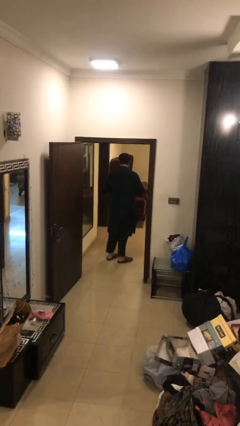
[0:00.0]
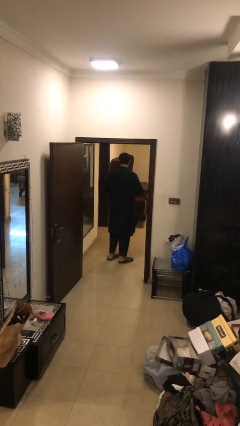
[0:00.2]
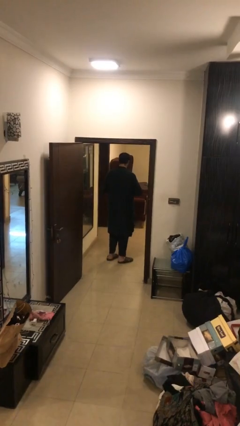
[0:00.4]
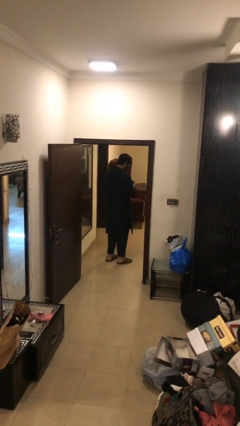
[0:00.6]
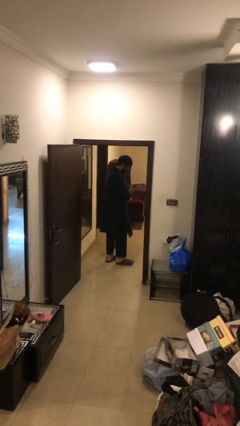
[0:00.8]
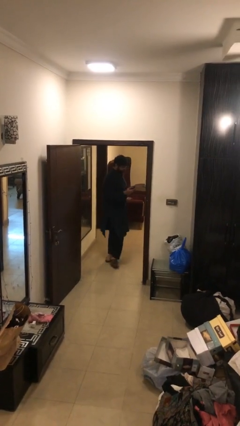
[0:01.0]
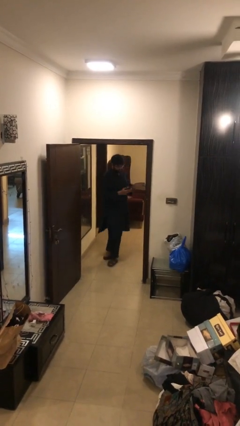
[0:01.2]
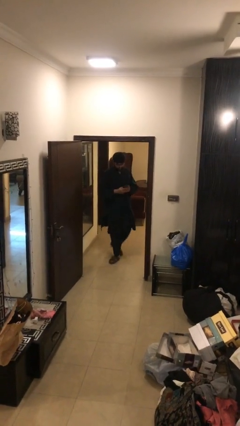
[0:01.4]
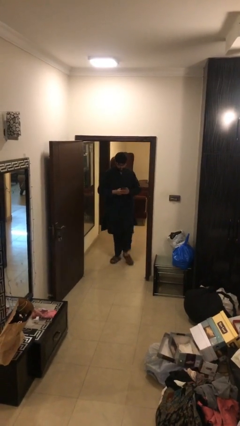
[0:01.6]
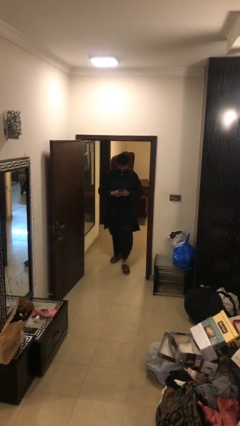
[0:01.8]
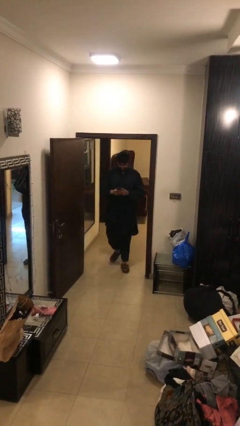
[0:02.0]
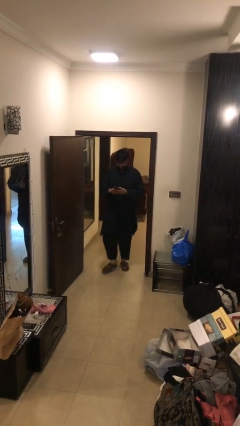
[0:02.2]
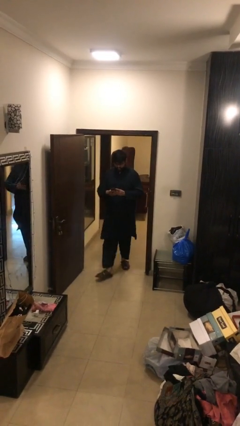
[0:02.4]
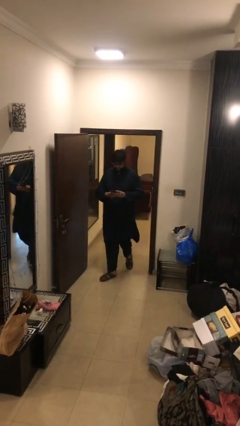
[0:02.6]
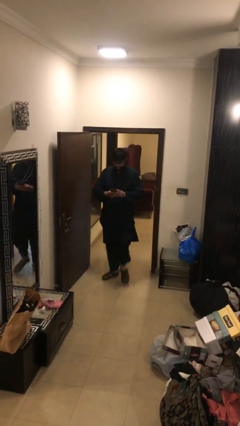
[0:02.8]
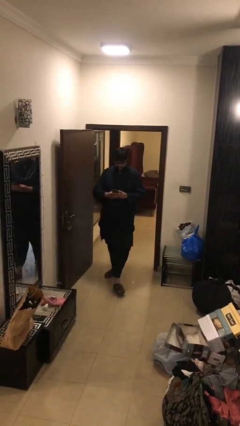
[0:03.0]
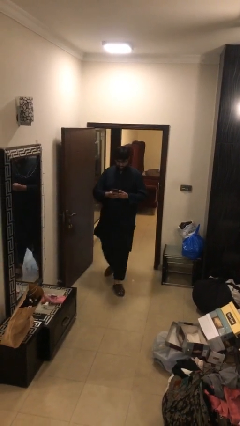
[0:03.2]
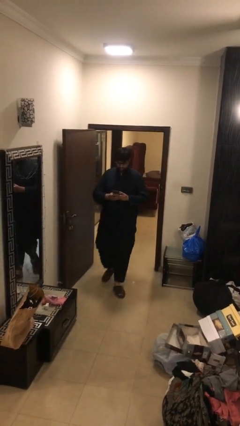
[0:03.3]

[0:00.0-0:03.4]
person enters scene through structure

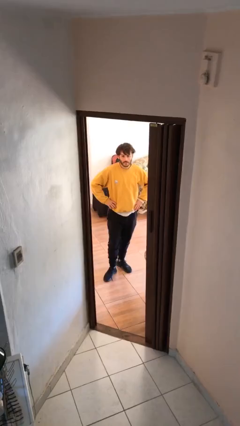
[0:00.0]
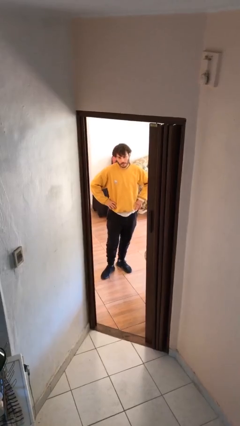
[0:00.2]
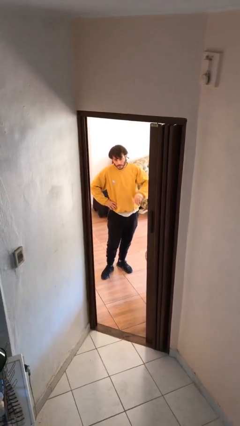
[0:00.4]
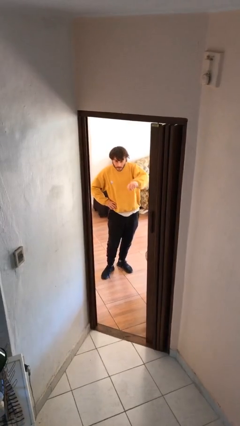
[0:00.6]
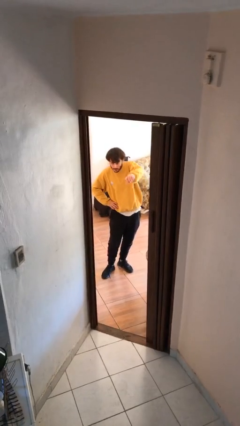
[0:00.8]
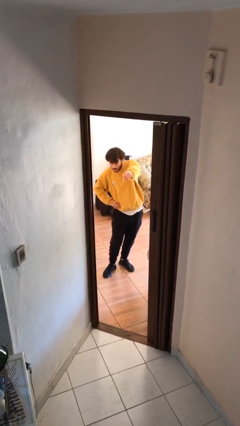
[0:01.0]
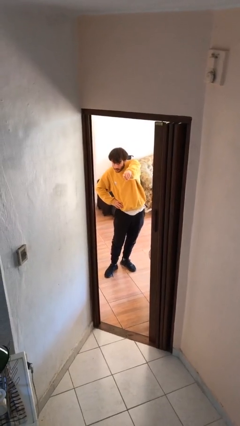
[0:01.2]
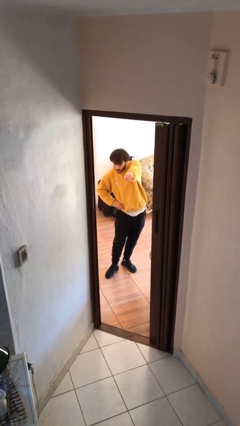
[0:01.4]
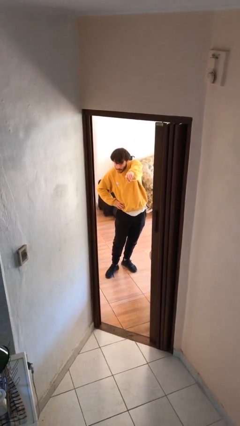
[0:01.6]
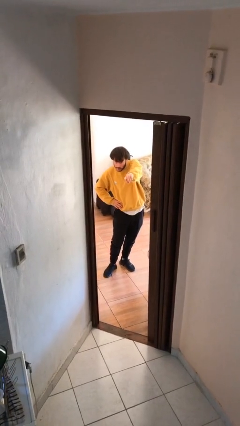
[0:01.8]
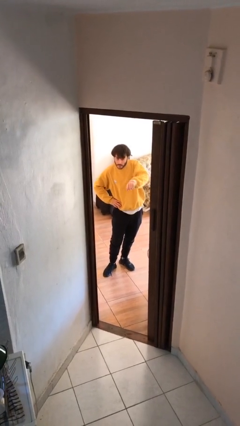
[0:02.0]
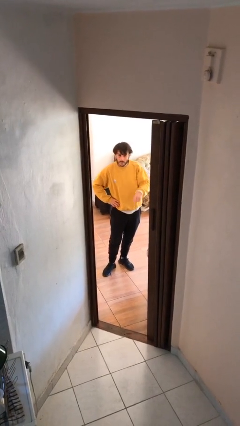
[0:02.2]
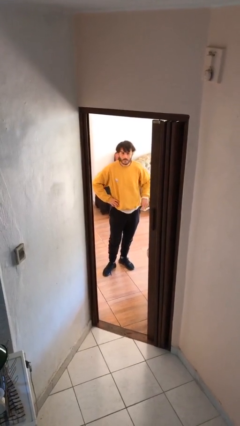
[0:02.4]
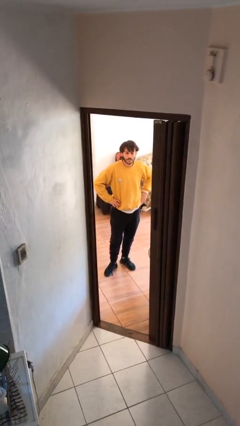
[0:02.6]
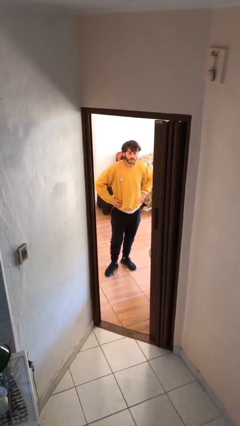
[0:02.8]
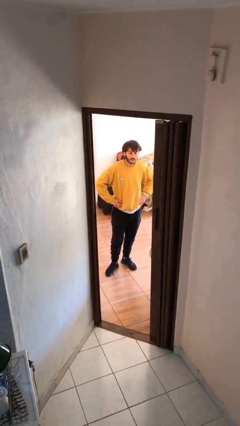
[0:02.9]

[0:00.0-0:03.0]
person points at person

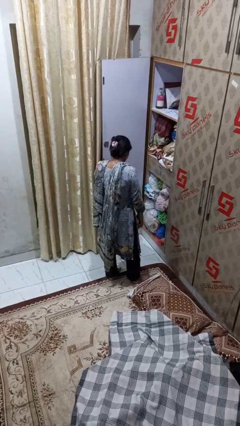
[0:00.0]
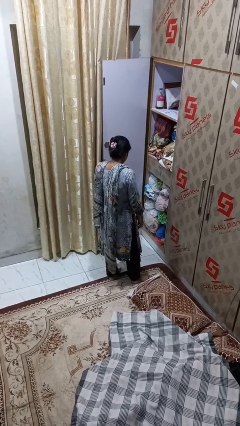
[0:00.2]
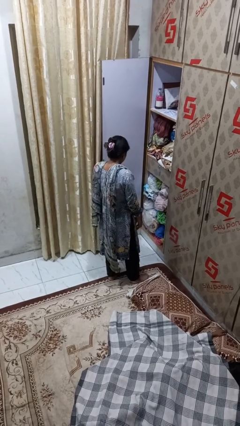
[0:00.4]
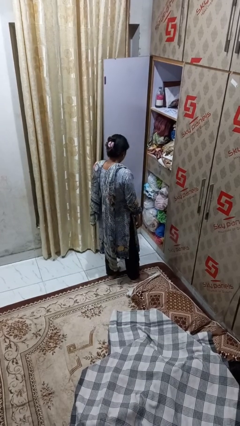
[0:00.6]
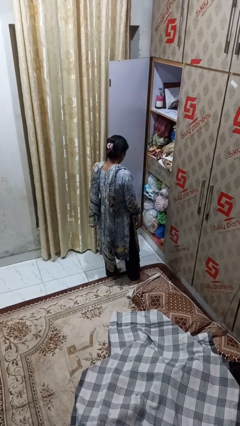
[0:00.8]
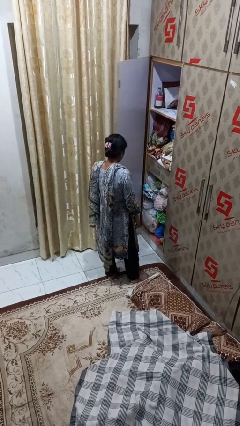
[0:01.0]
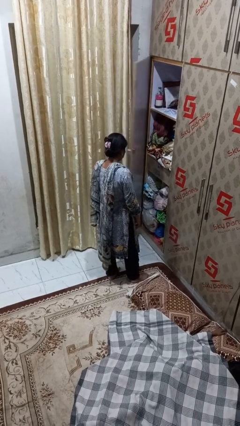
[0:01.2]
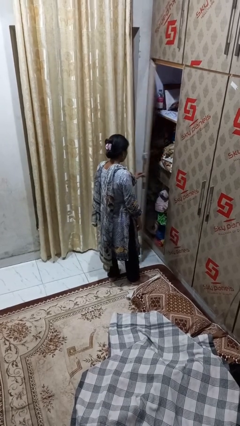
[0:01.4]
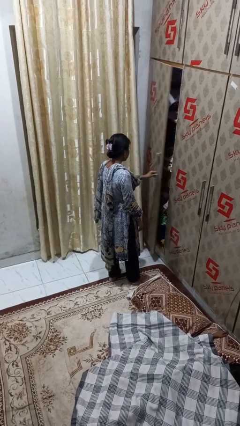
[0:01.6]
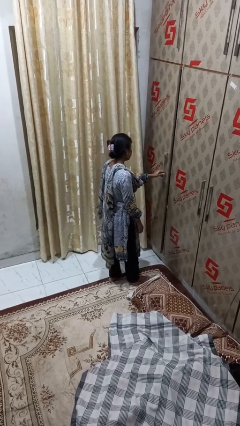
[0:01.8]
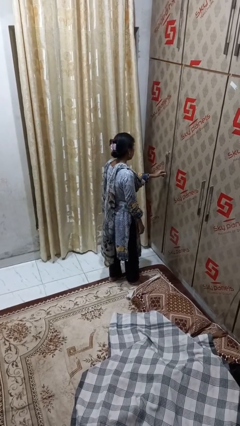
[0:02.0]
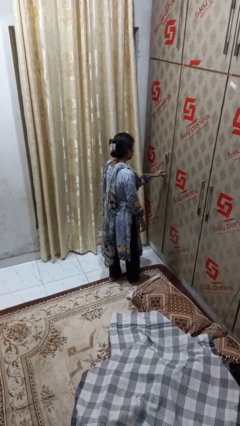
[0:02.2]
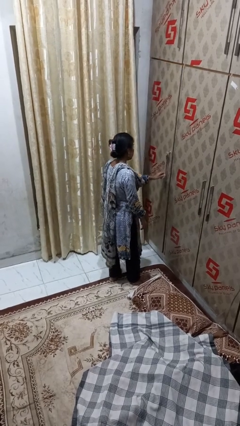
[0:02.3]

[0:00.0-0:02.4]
person closes closet door

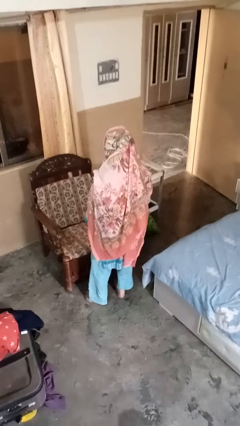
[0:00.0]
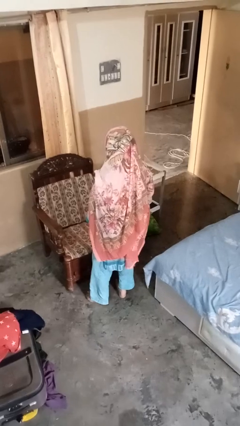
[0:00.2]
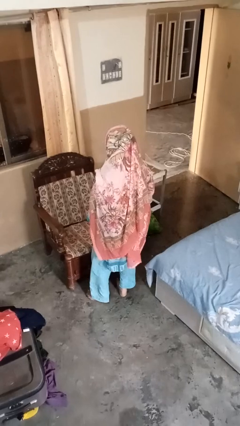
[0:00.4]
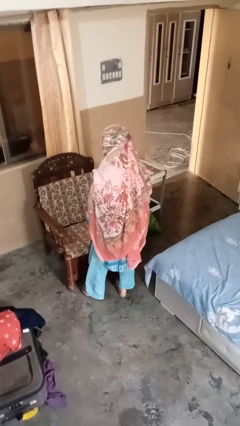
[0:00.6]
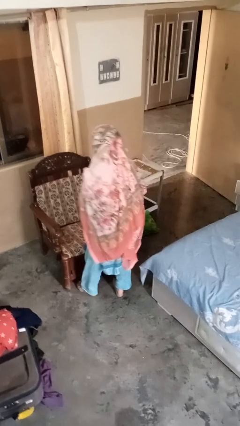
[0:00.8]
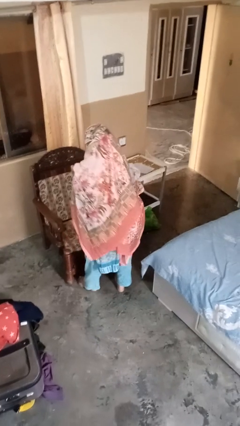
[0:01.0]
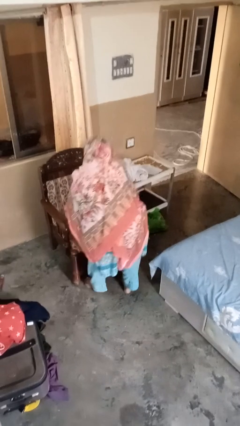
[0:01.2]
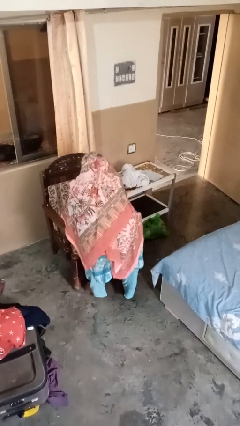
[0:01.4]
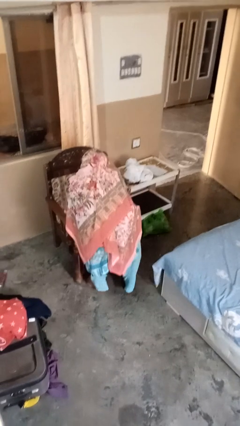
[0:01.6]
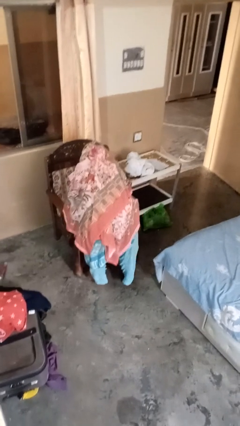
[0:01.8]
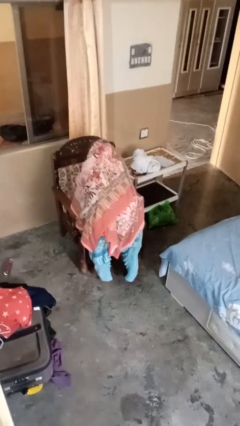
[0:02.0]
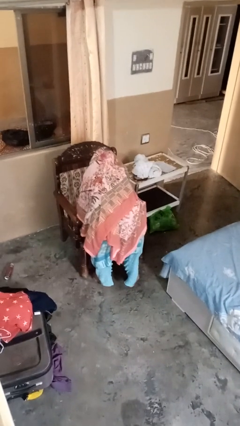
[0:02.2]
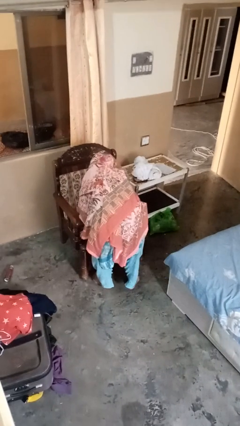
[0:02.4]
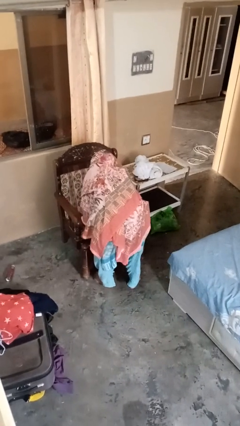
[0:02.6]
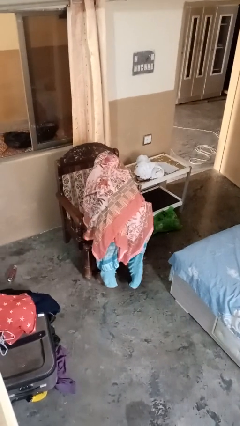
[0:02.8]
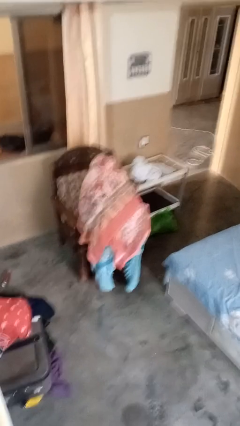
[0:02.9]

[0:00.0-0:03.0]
person searches under couch

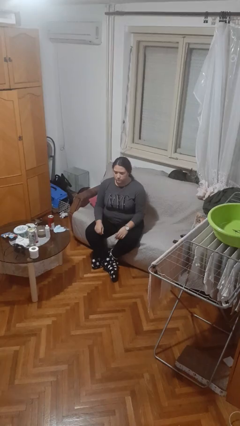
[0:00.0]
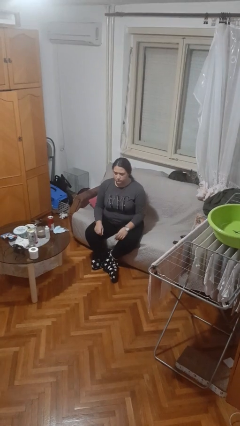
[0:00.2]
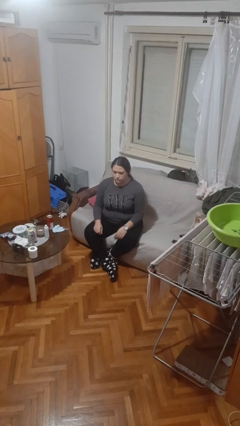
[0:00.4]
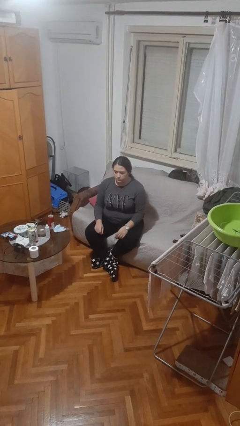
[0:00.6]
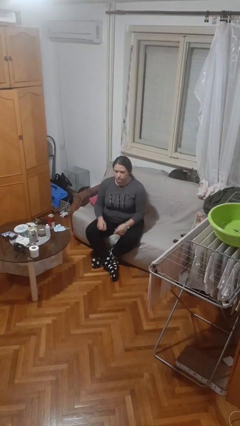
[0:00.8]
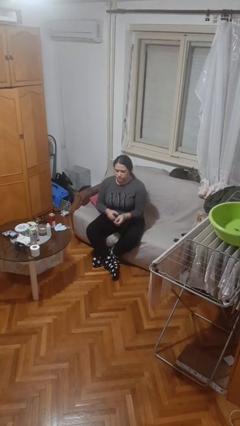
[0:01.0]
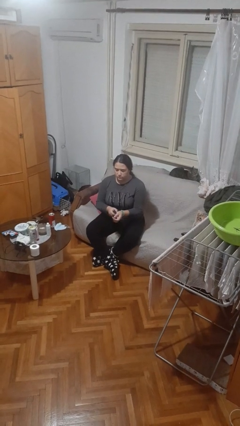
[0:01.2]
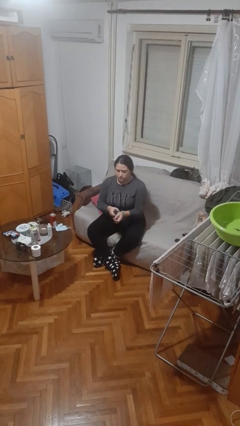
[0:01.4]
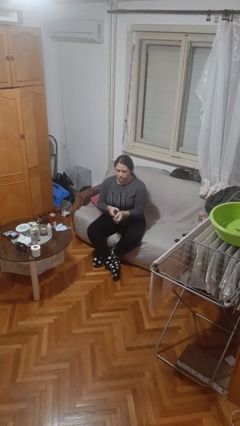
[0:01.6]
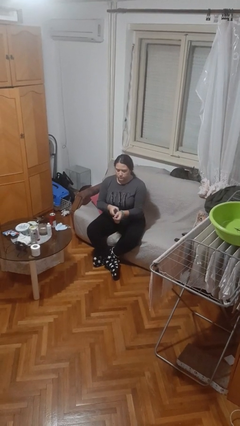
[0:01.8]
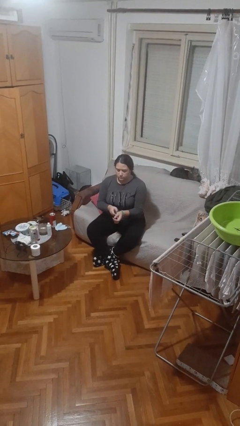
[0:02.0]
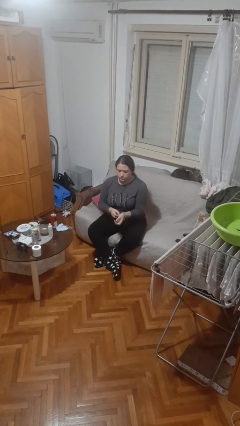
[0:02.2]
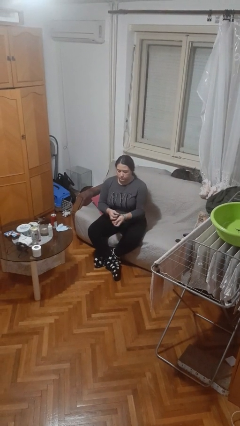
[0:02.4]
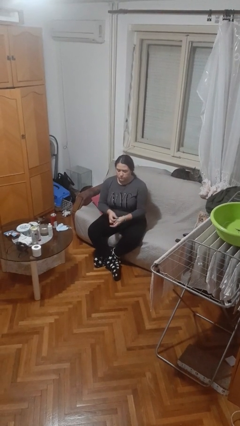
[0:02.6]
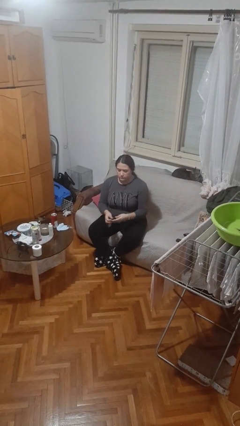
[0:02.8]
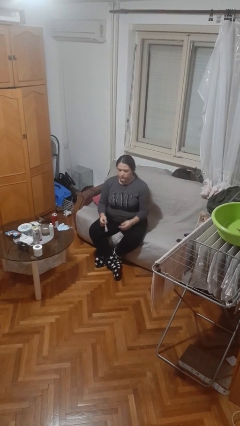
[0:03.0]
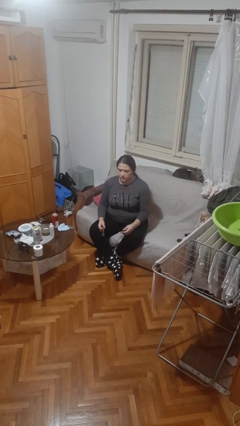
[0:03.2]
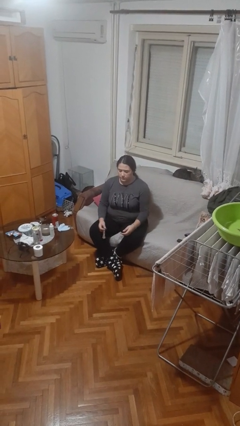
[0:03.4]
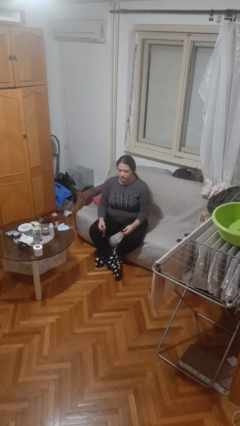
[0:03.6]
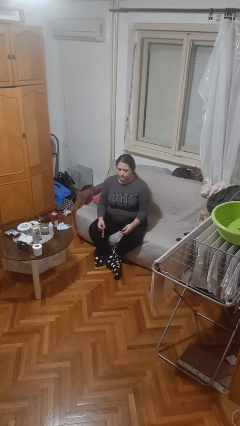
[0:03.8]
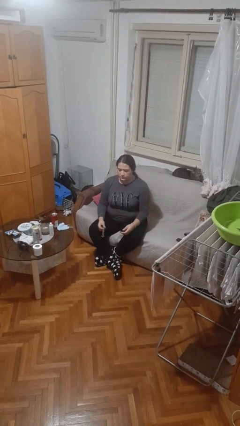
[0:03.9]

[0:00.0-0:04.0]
person takes off wristwatch

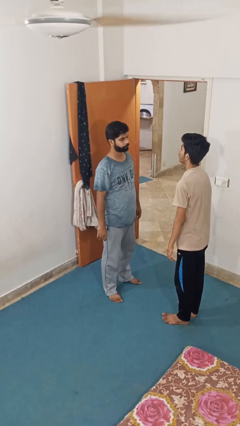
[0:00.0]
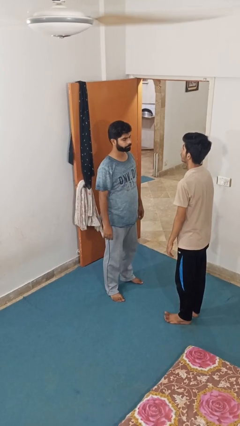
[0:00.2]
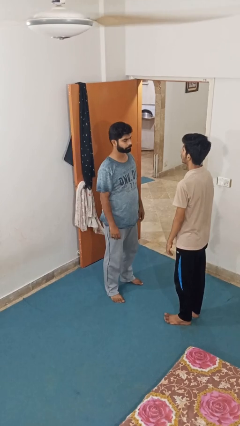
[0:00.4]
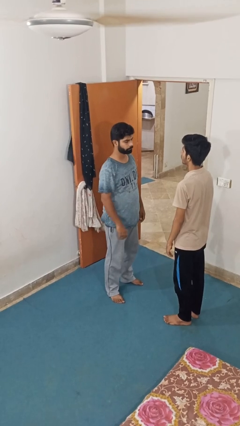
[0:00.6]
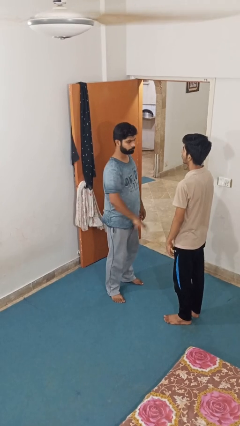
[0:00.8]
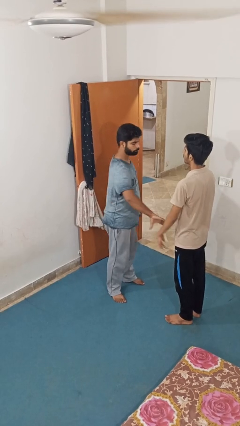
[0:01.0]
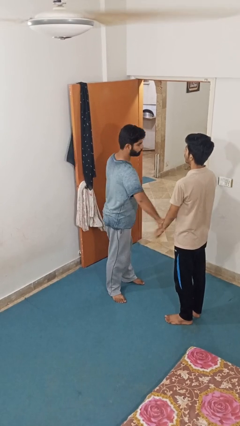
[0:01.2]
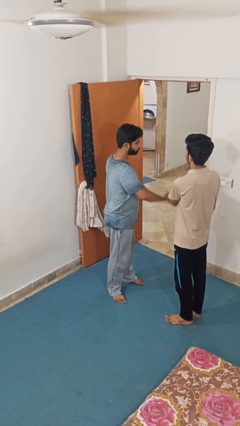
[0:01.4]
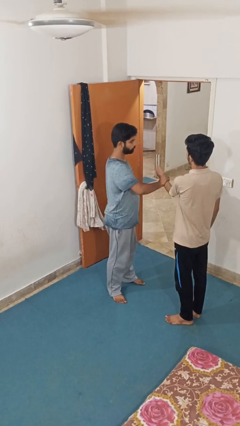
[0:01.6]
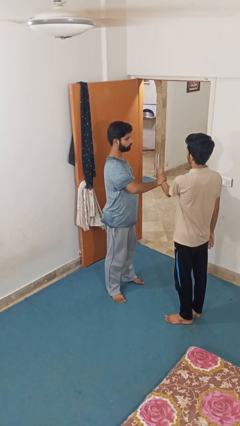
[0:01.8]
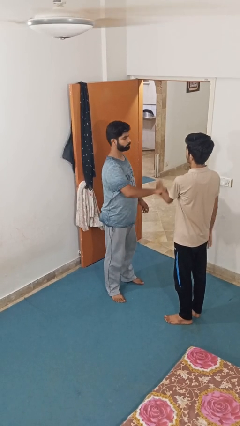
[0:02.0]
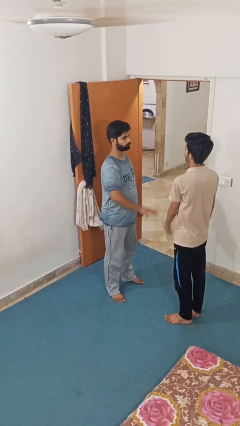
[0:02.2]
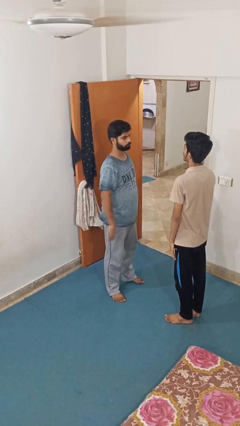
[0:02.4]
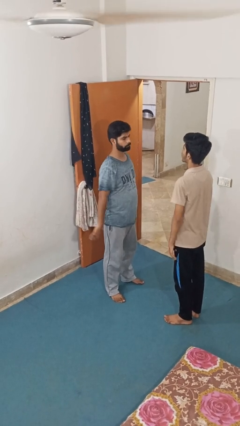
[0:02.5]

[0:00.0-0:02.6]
person grabs person by forearm
